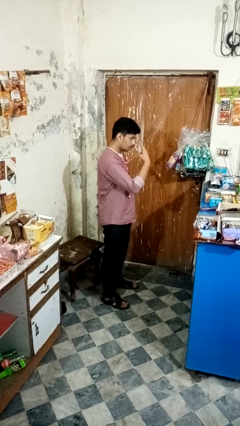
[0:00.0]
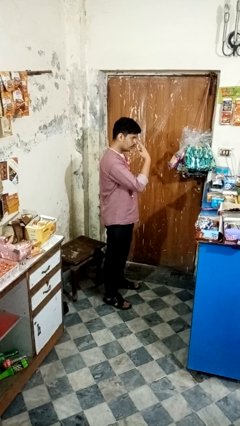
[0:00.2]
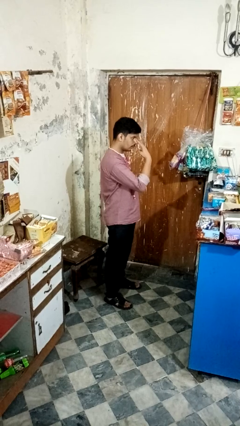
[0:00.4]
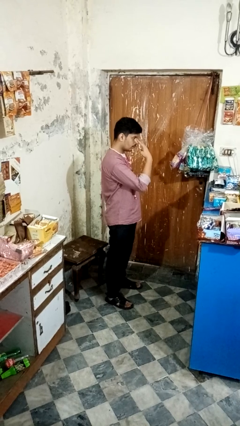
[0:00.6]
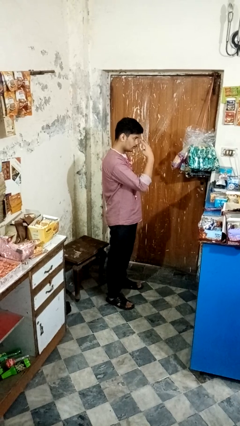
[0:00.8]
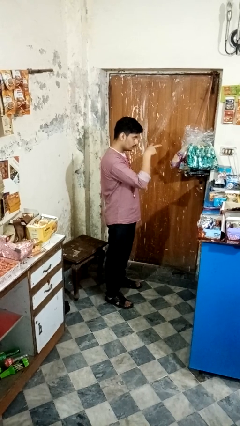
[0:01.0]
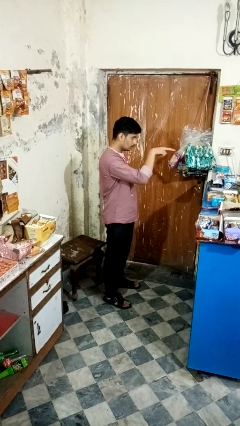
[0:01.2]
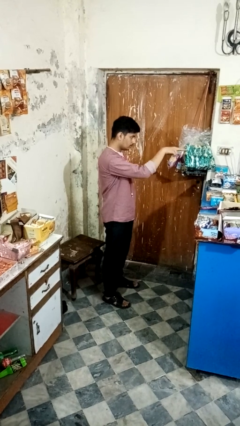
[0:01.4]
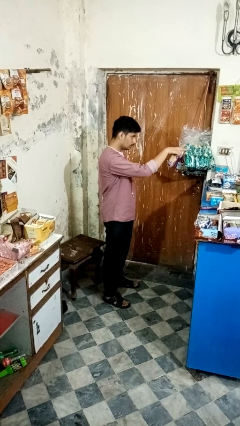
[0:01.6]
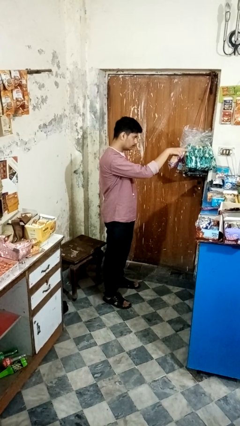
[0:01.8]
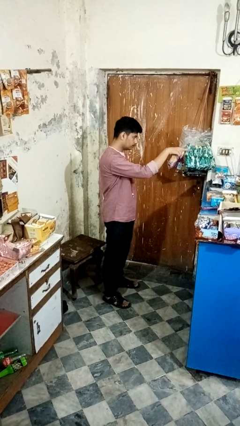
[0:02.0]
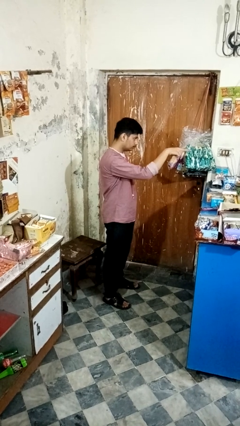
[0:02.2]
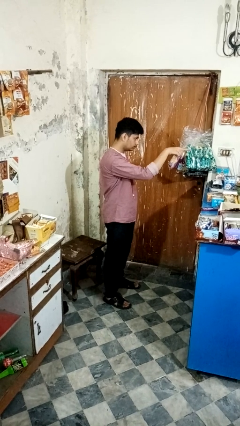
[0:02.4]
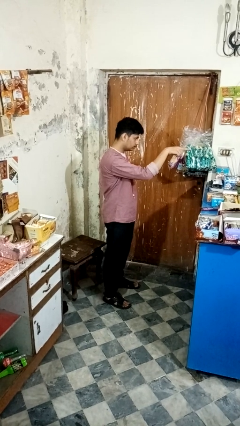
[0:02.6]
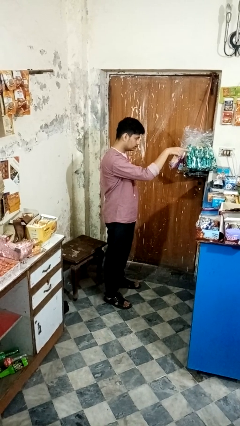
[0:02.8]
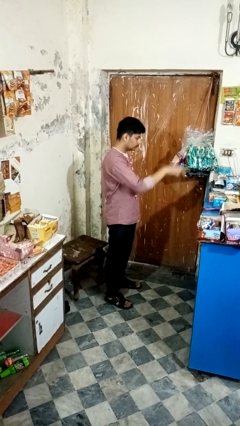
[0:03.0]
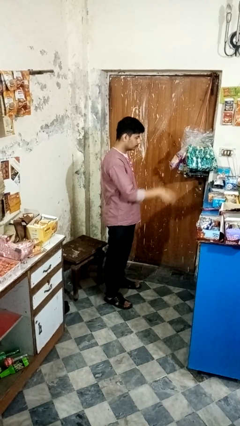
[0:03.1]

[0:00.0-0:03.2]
person gestures watch closely

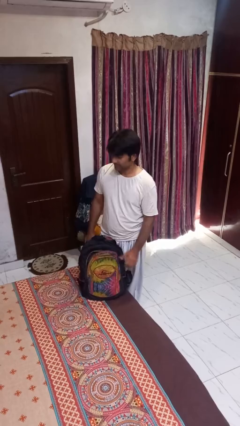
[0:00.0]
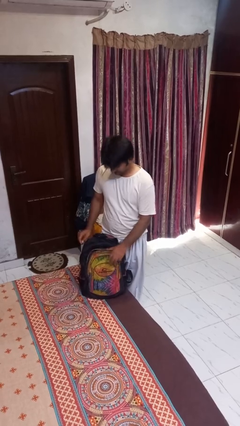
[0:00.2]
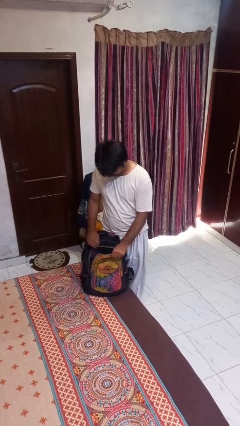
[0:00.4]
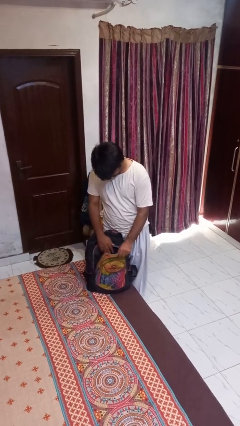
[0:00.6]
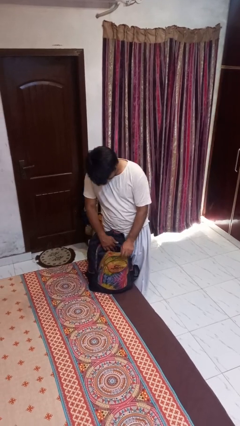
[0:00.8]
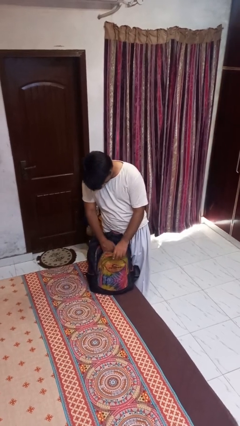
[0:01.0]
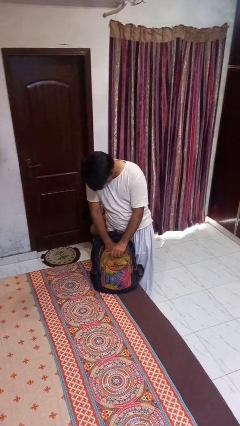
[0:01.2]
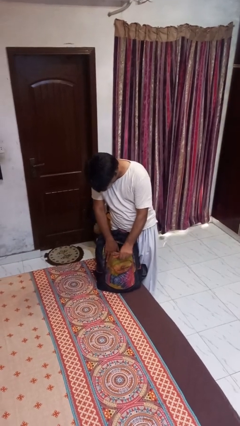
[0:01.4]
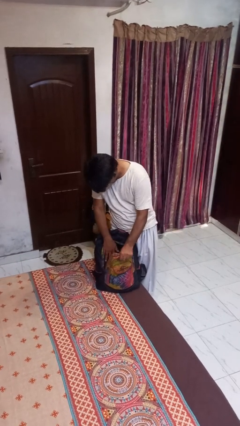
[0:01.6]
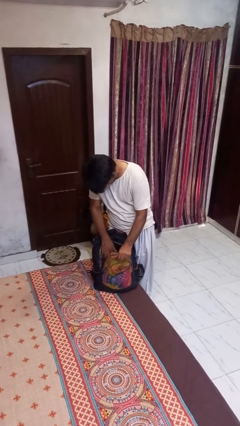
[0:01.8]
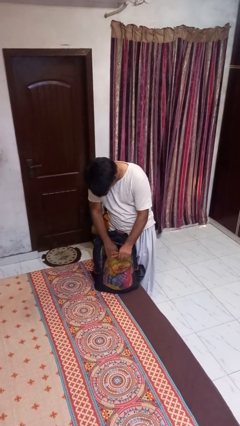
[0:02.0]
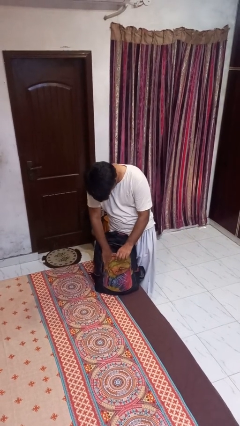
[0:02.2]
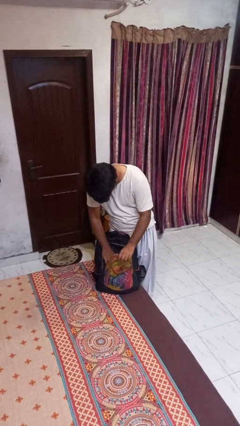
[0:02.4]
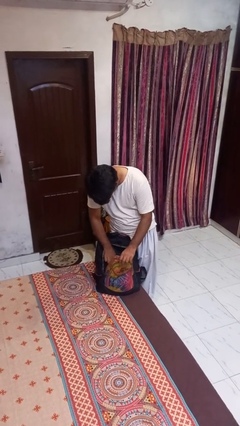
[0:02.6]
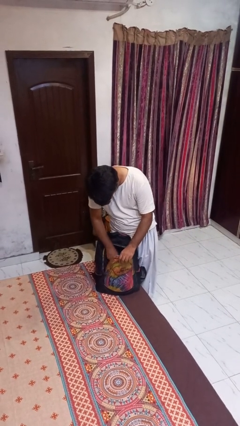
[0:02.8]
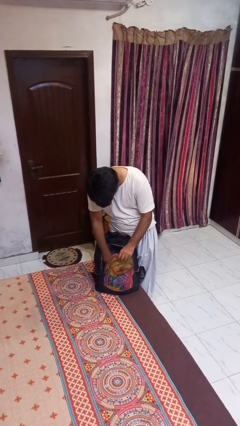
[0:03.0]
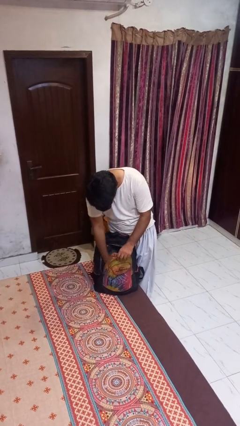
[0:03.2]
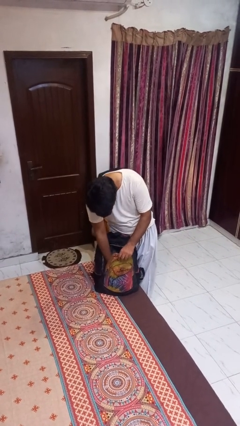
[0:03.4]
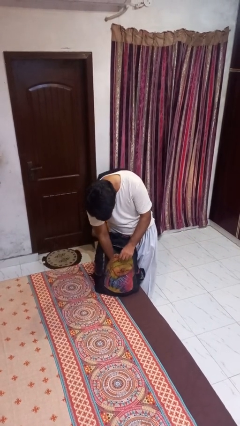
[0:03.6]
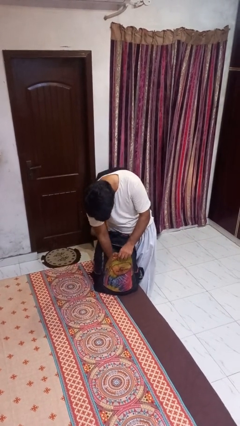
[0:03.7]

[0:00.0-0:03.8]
person searches in backpack

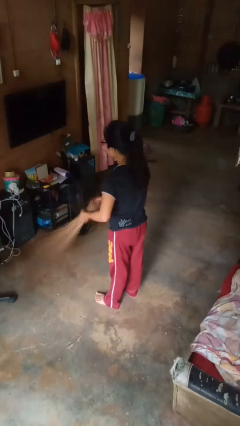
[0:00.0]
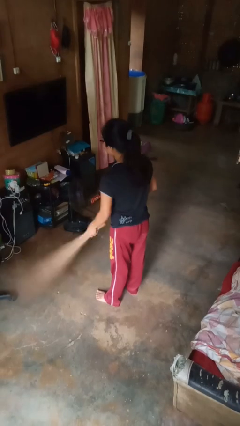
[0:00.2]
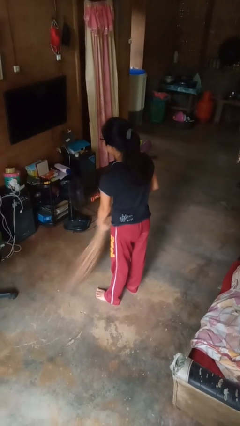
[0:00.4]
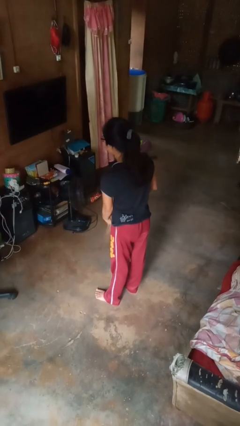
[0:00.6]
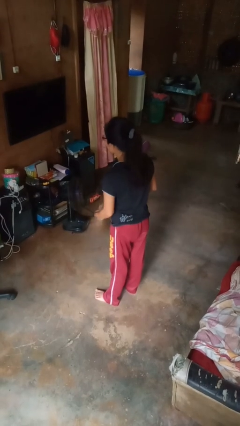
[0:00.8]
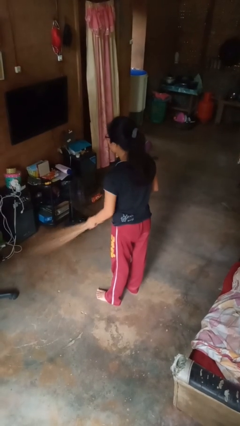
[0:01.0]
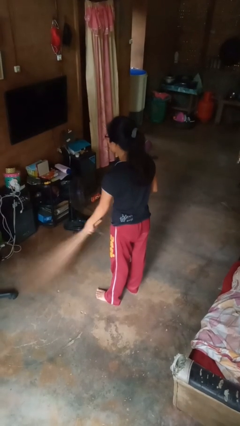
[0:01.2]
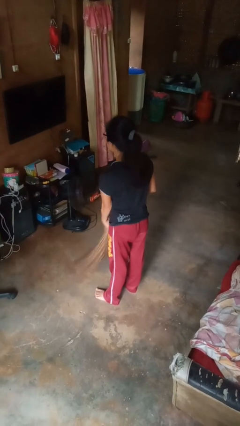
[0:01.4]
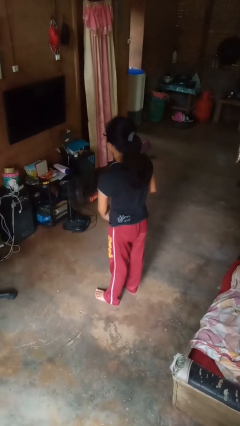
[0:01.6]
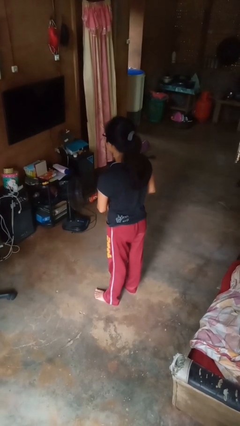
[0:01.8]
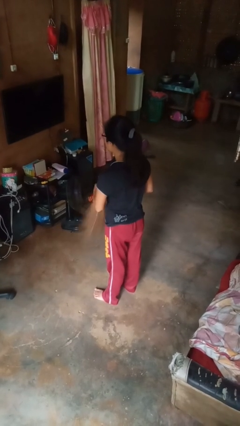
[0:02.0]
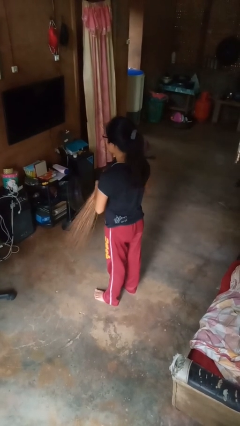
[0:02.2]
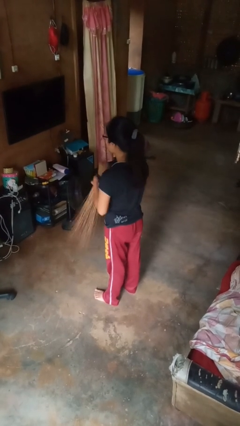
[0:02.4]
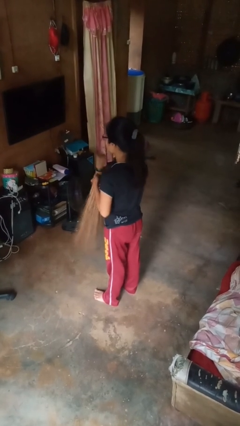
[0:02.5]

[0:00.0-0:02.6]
person sweeps floor

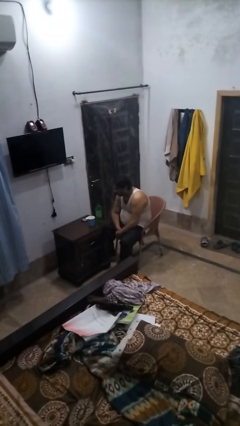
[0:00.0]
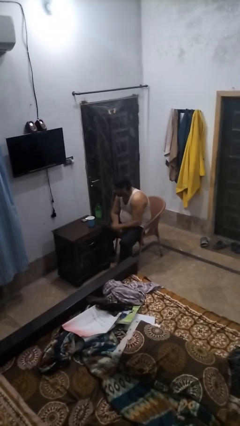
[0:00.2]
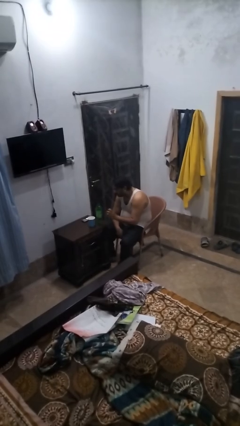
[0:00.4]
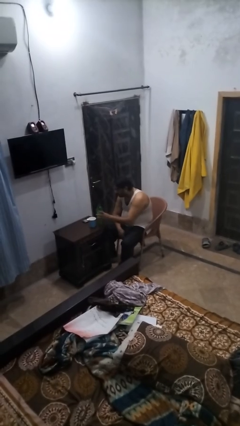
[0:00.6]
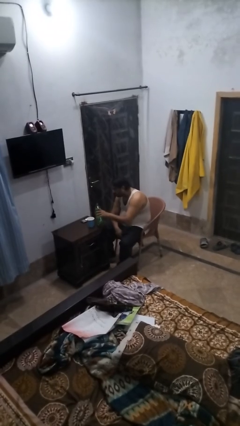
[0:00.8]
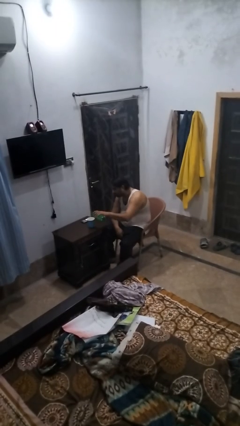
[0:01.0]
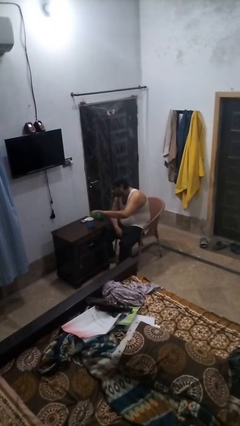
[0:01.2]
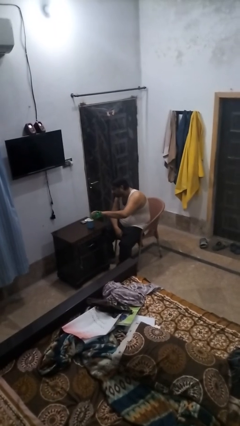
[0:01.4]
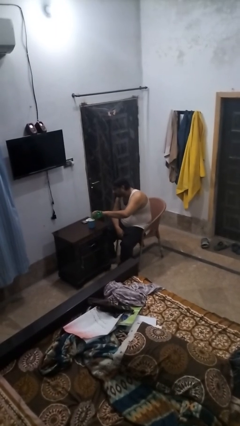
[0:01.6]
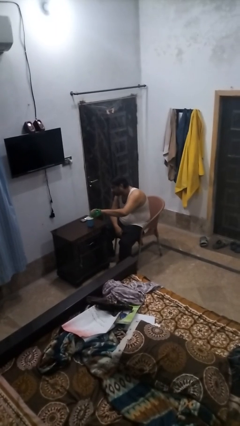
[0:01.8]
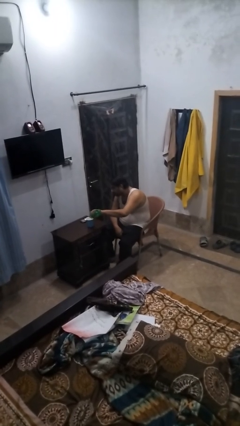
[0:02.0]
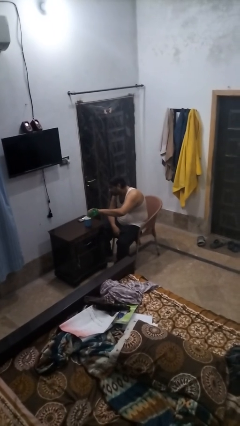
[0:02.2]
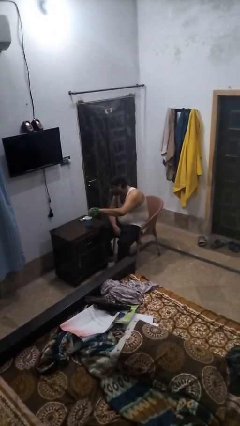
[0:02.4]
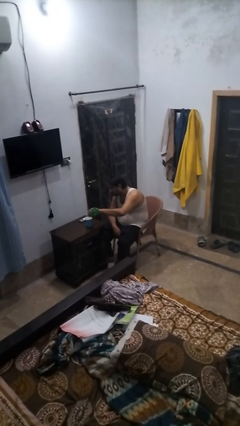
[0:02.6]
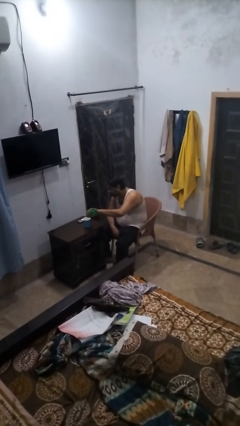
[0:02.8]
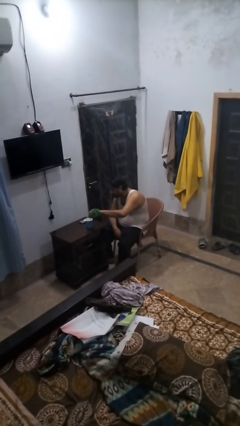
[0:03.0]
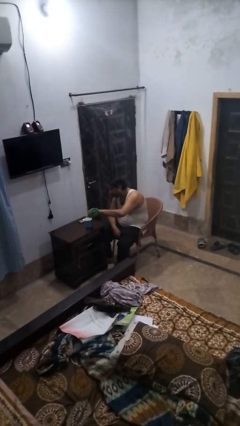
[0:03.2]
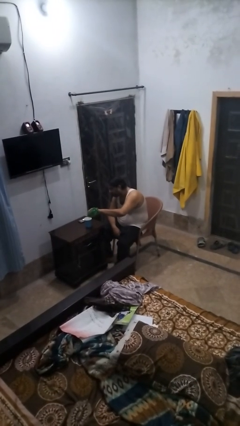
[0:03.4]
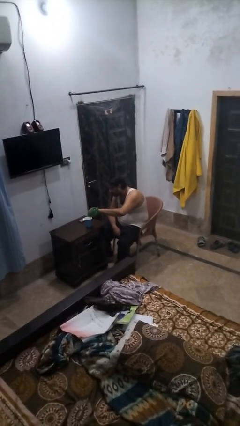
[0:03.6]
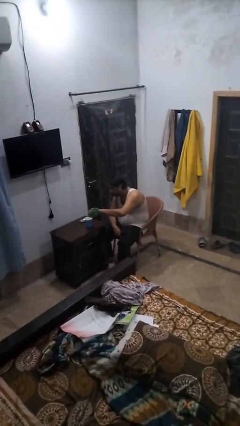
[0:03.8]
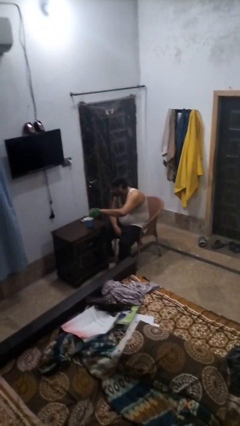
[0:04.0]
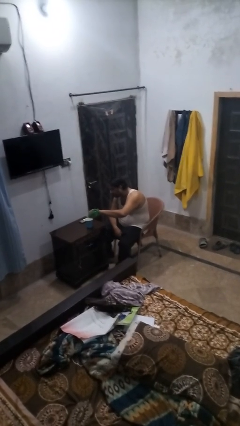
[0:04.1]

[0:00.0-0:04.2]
person pours liquid into cup

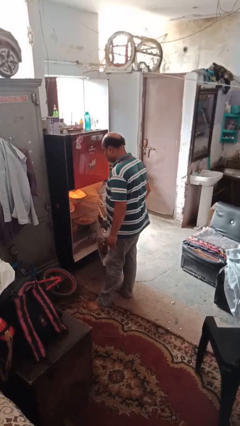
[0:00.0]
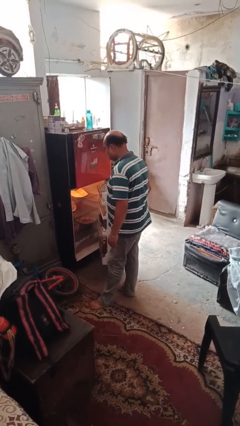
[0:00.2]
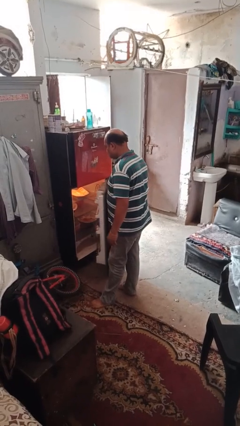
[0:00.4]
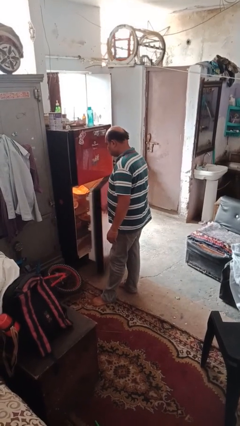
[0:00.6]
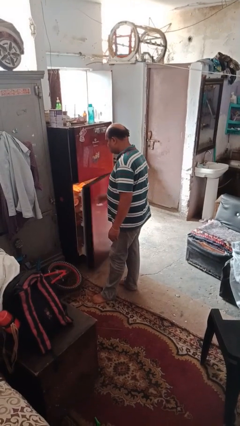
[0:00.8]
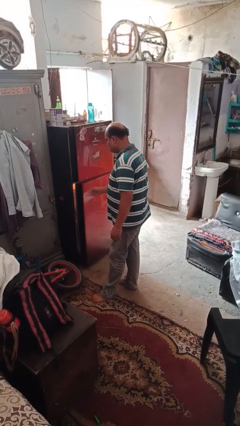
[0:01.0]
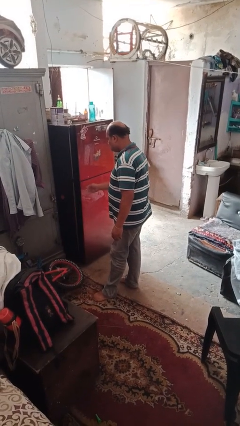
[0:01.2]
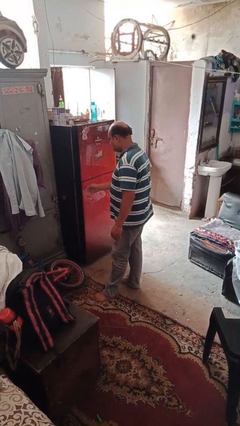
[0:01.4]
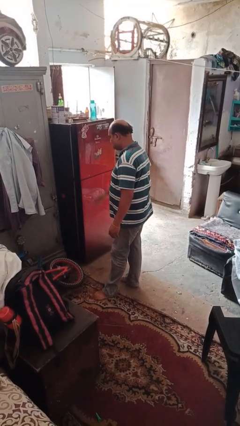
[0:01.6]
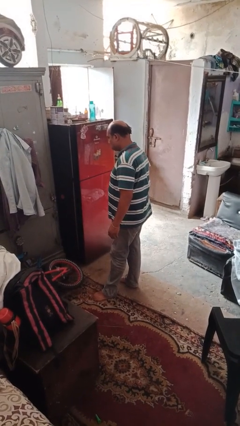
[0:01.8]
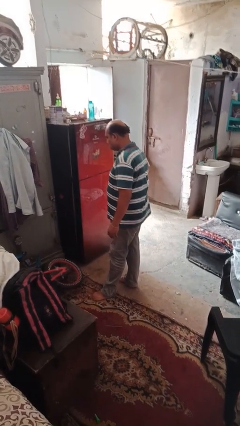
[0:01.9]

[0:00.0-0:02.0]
person closes refrigerator

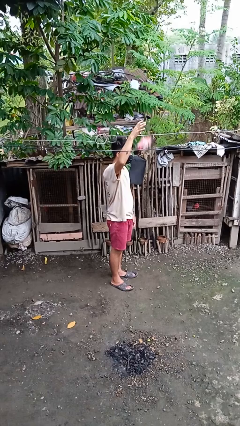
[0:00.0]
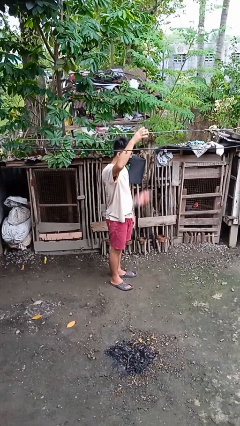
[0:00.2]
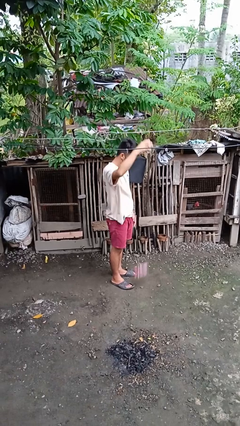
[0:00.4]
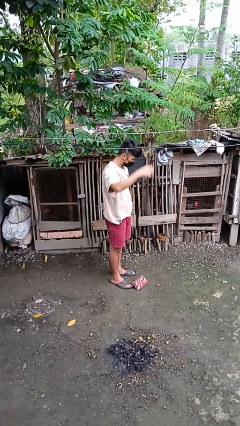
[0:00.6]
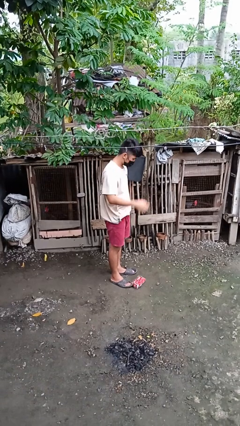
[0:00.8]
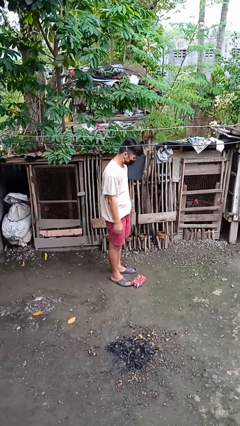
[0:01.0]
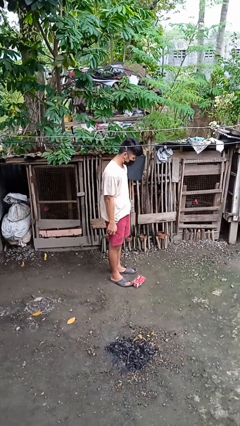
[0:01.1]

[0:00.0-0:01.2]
person drops object

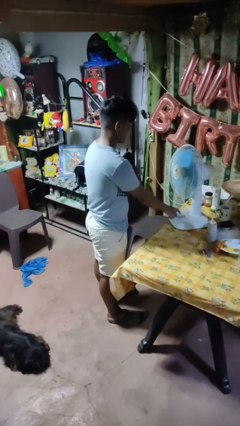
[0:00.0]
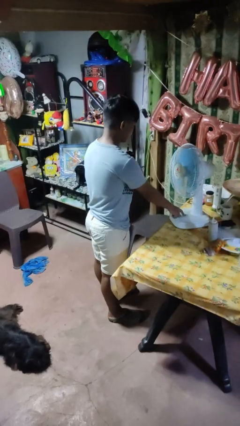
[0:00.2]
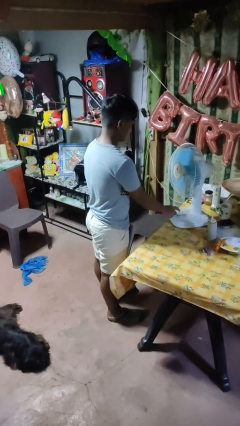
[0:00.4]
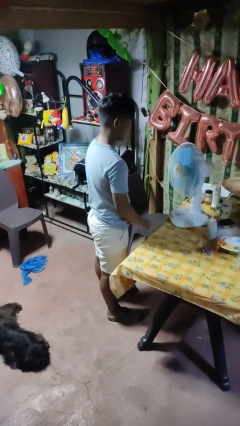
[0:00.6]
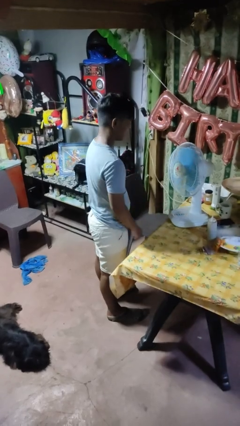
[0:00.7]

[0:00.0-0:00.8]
person turns on fan
